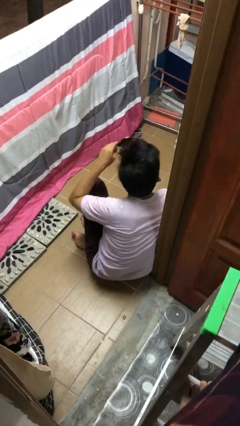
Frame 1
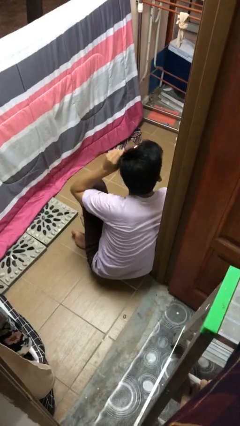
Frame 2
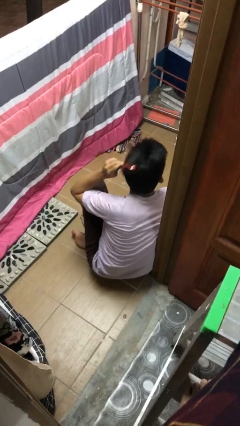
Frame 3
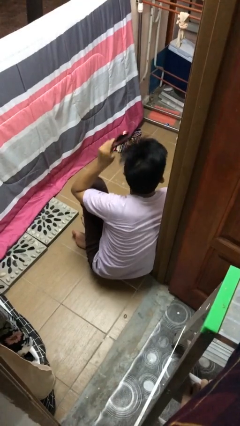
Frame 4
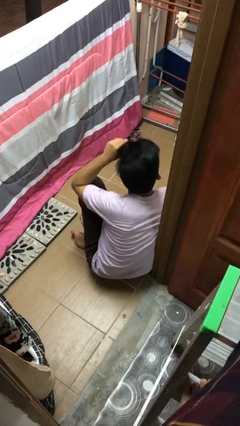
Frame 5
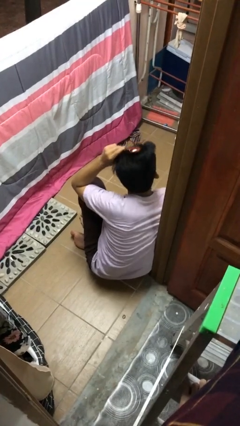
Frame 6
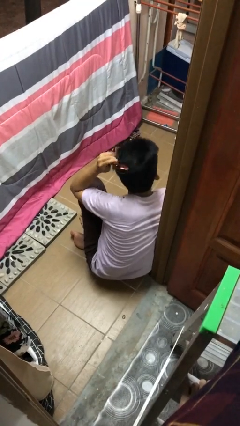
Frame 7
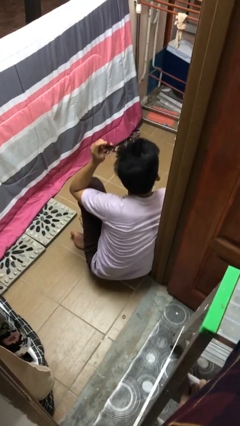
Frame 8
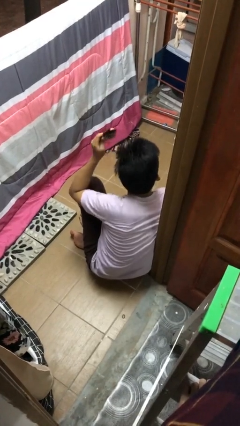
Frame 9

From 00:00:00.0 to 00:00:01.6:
person brushes hair

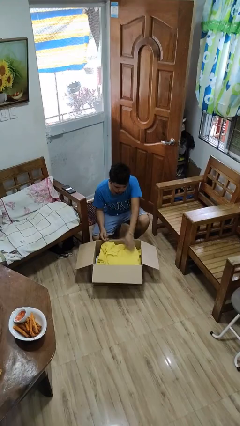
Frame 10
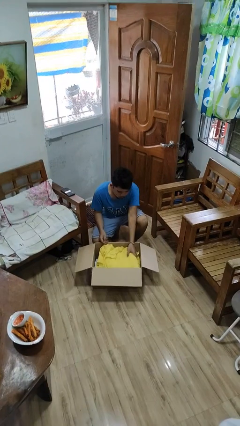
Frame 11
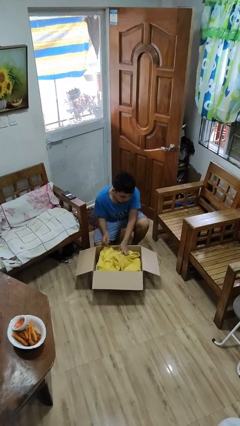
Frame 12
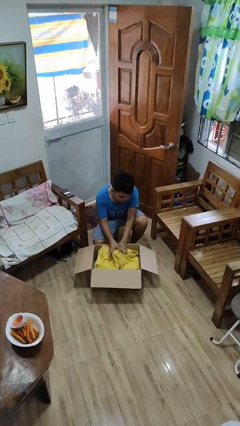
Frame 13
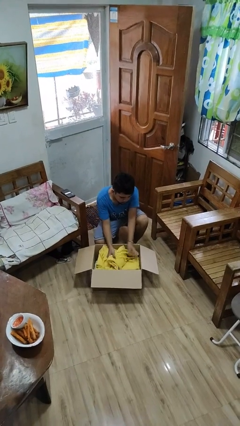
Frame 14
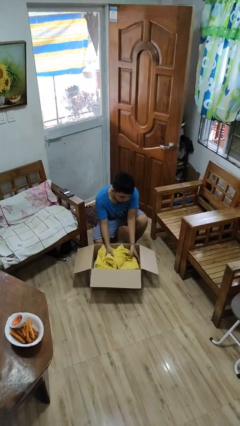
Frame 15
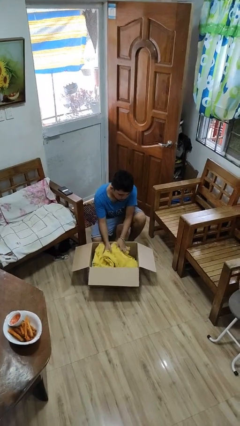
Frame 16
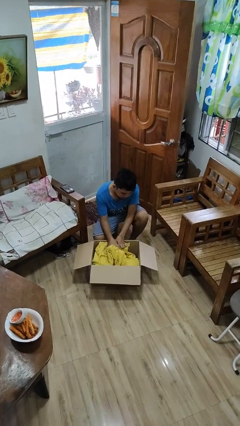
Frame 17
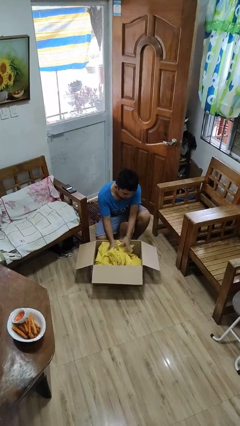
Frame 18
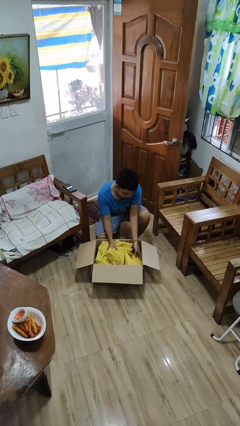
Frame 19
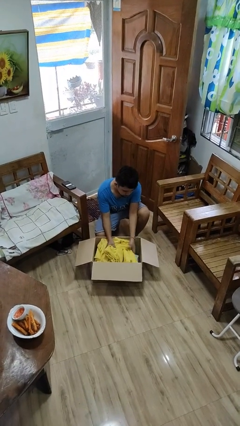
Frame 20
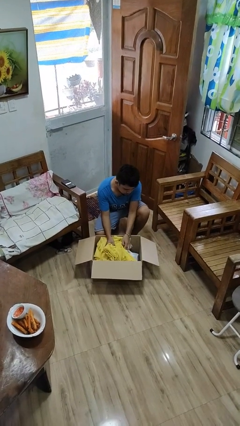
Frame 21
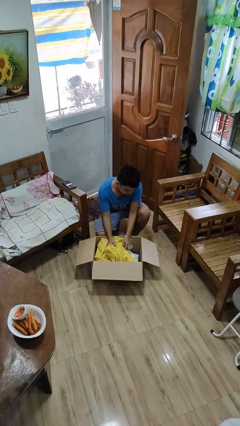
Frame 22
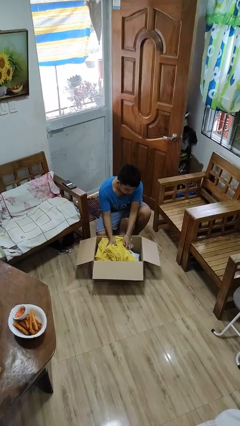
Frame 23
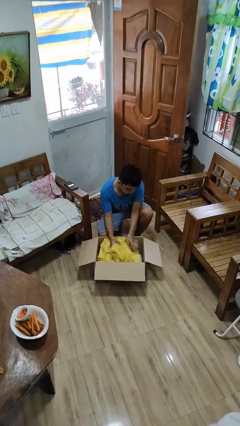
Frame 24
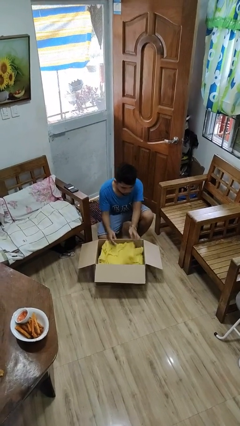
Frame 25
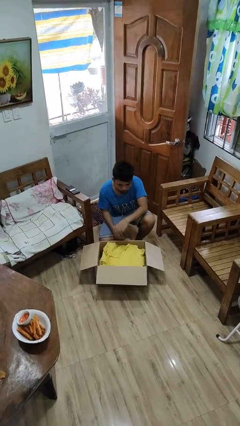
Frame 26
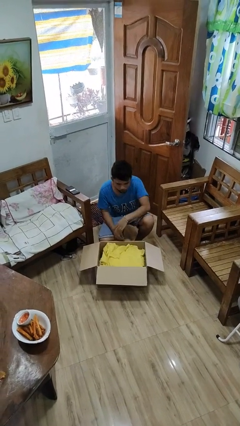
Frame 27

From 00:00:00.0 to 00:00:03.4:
person searches in box

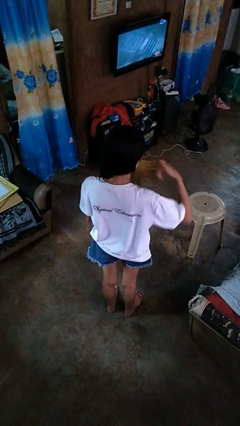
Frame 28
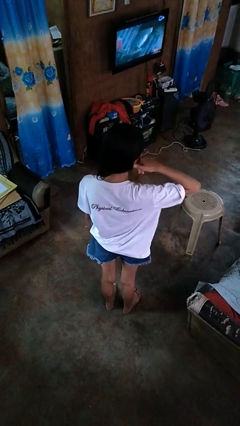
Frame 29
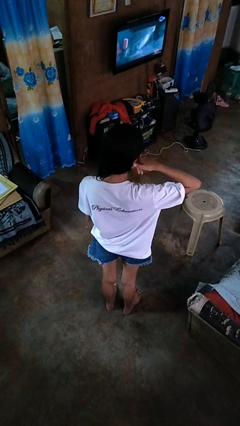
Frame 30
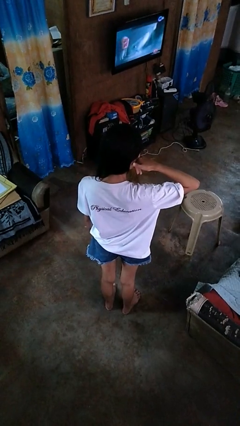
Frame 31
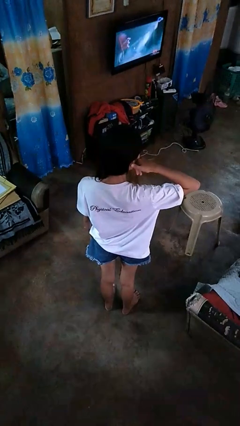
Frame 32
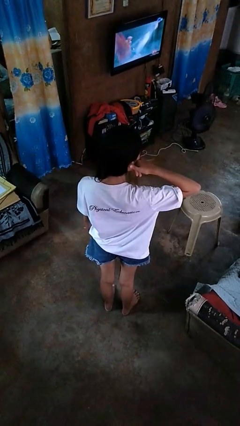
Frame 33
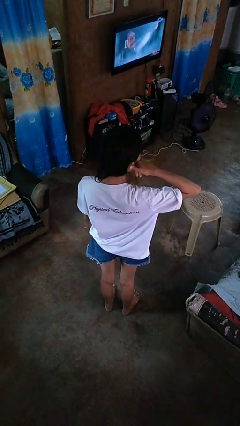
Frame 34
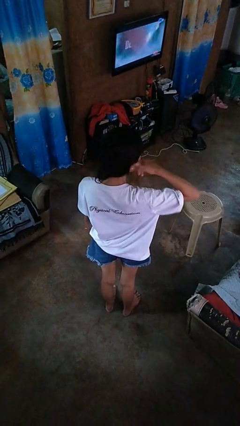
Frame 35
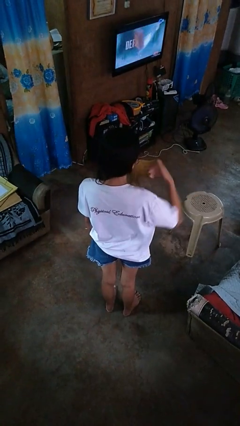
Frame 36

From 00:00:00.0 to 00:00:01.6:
person gestures call me

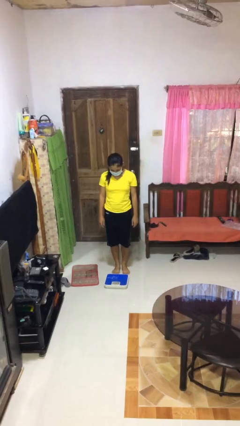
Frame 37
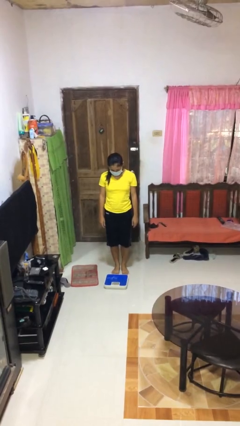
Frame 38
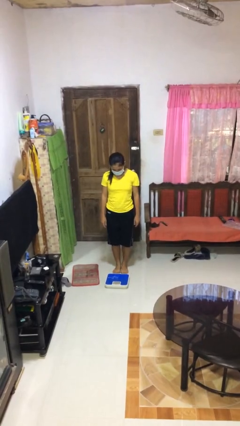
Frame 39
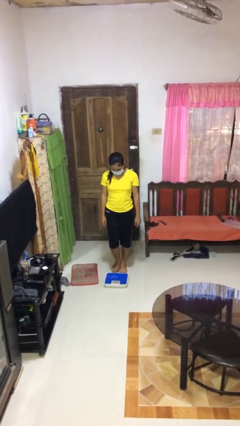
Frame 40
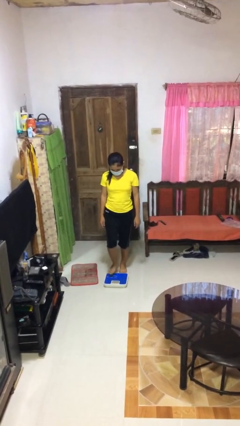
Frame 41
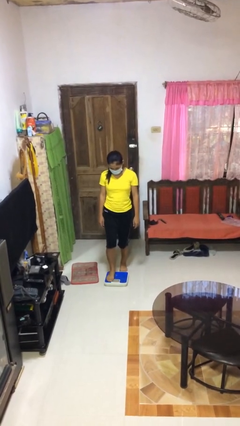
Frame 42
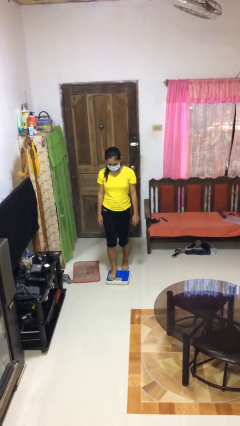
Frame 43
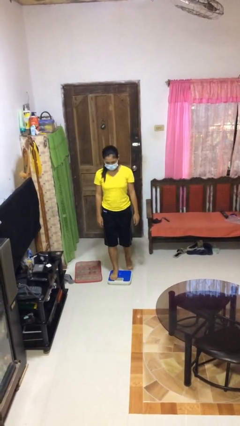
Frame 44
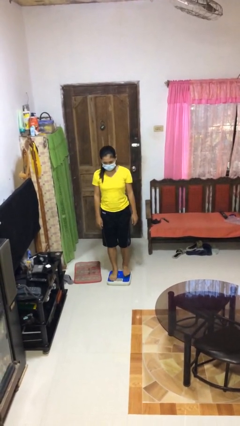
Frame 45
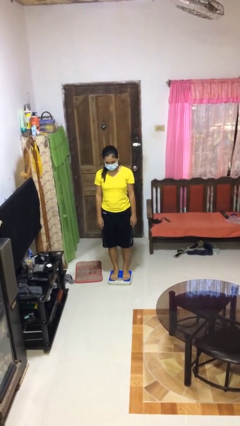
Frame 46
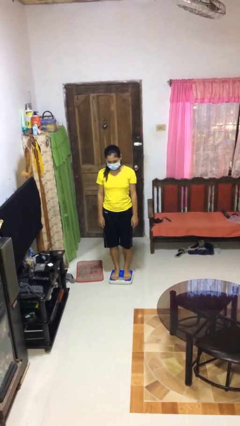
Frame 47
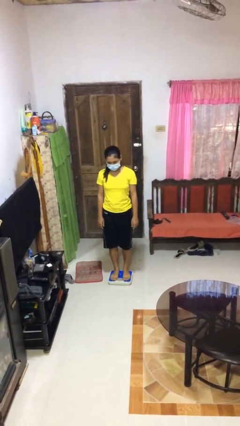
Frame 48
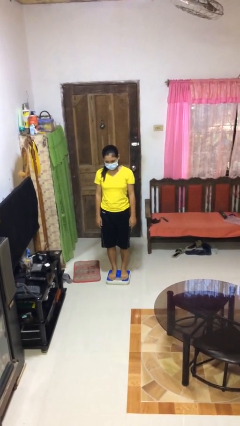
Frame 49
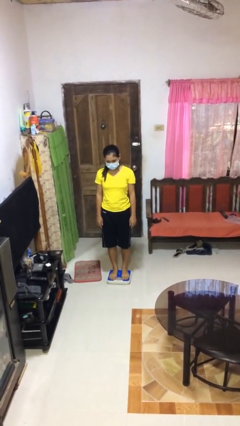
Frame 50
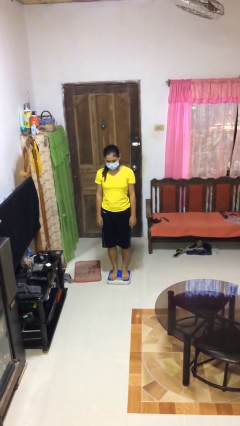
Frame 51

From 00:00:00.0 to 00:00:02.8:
person uses bodyweight scale

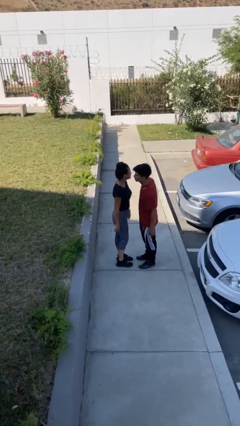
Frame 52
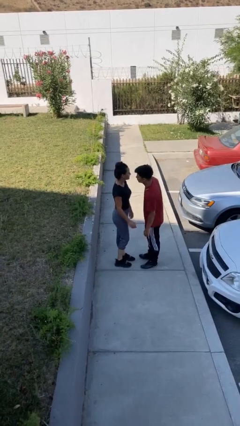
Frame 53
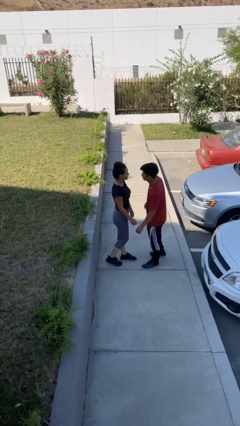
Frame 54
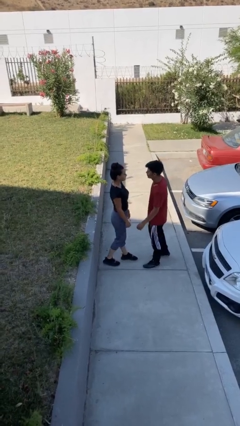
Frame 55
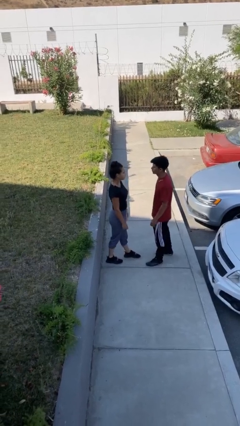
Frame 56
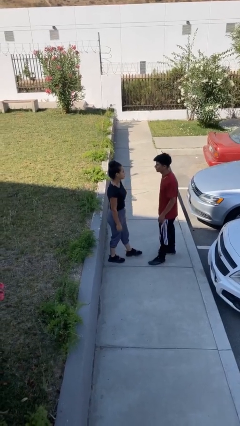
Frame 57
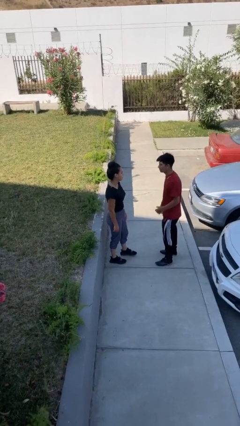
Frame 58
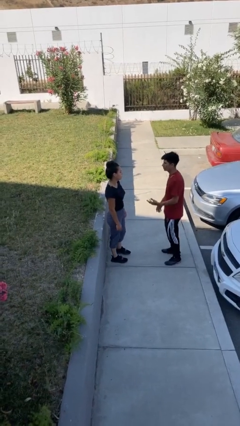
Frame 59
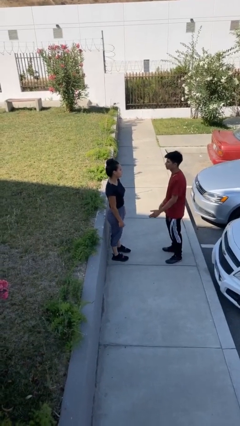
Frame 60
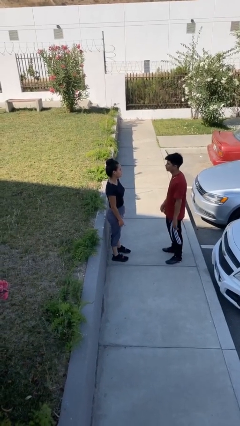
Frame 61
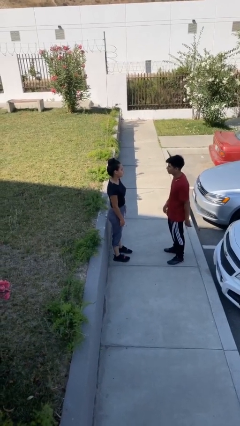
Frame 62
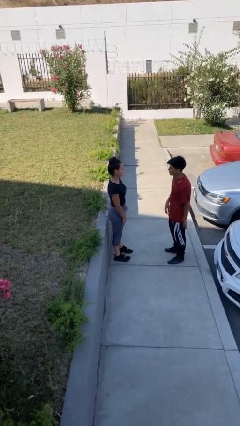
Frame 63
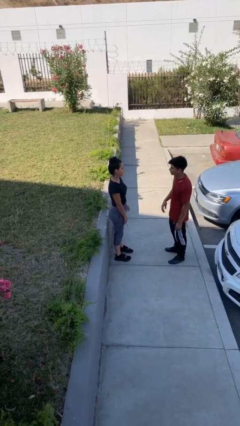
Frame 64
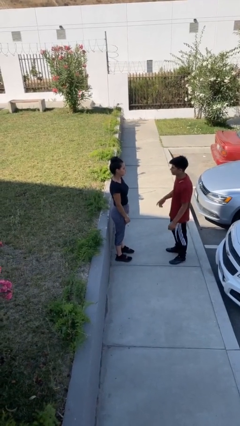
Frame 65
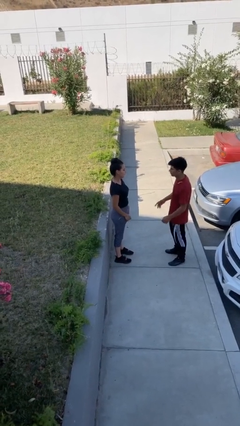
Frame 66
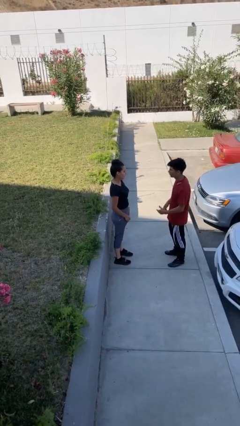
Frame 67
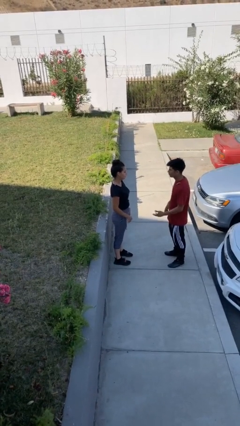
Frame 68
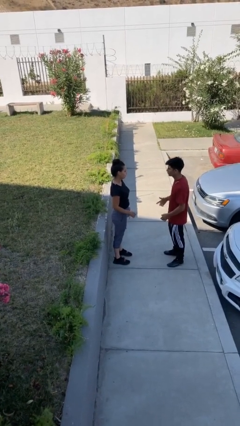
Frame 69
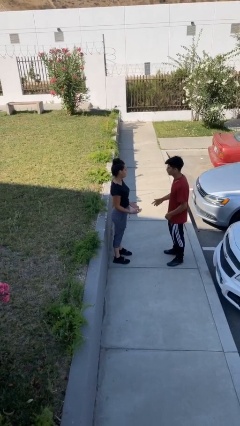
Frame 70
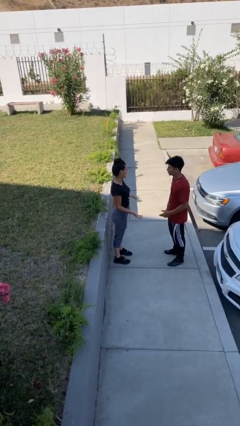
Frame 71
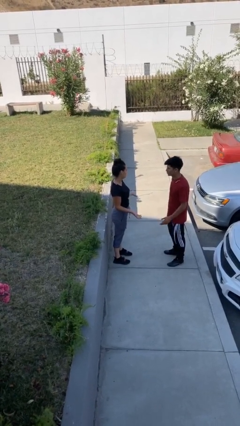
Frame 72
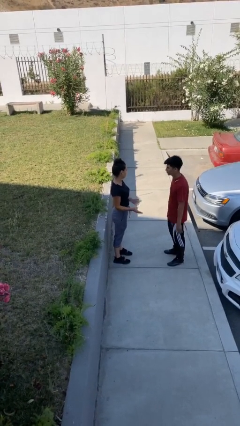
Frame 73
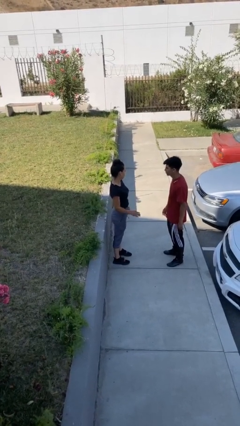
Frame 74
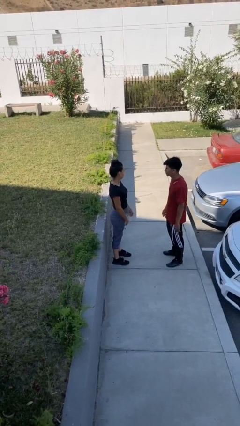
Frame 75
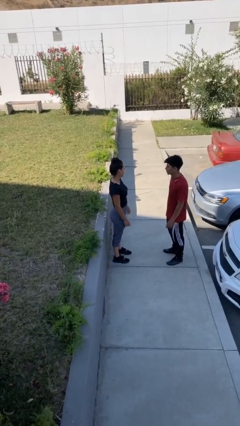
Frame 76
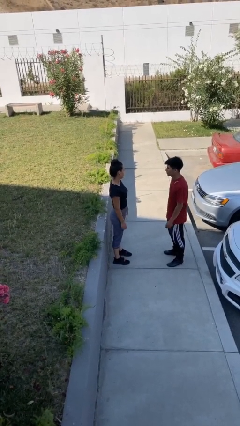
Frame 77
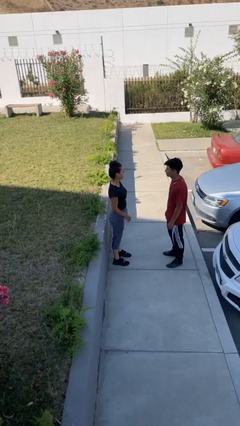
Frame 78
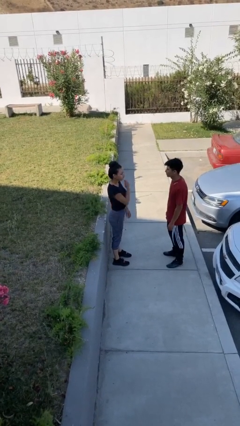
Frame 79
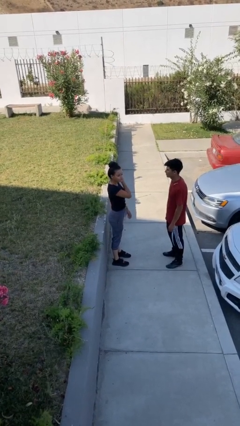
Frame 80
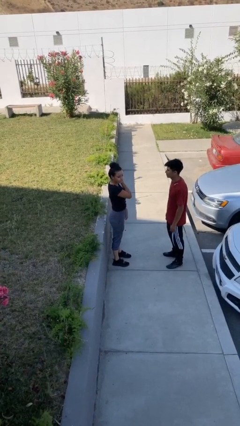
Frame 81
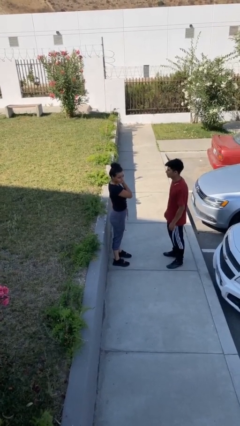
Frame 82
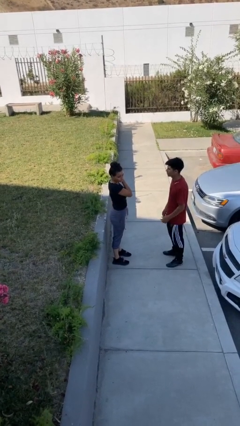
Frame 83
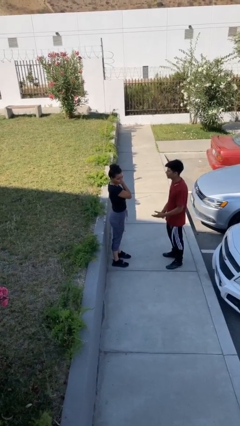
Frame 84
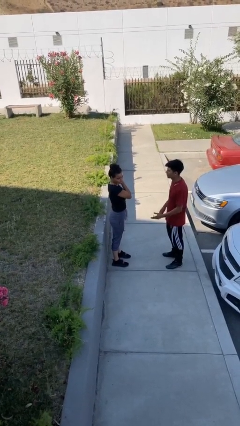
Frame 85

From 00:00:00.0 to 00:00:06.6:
person talks to person

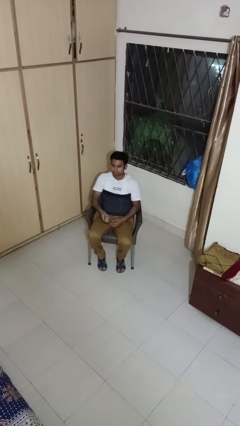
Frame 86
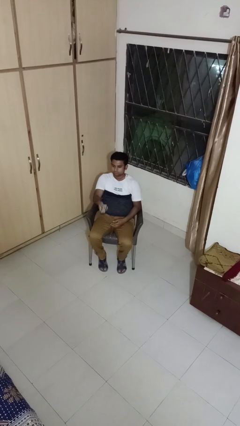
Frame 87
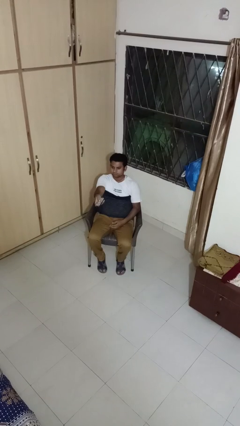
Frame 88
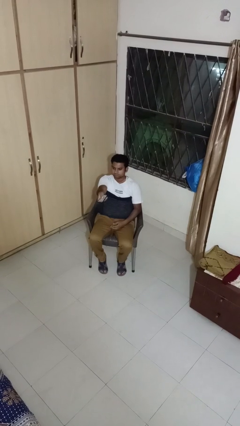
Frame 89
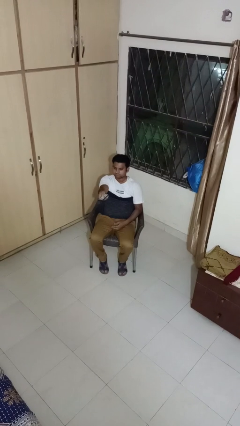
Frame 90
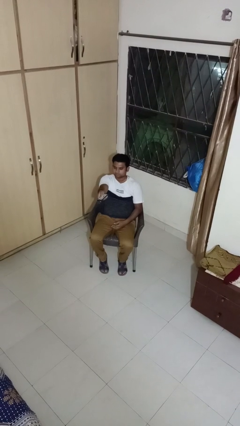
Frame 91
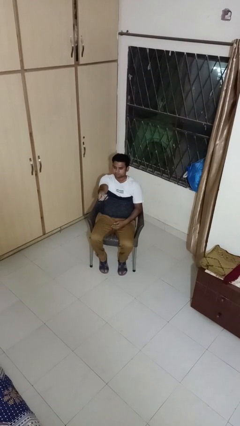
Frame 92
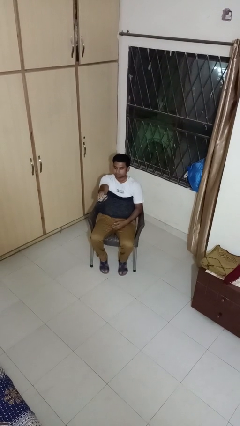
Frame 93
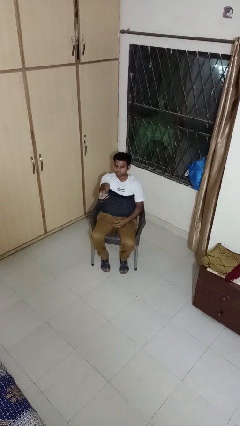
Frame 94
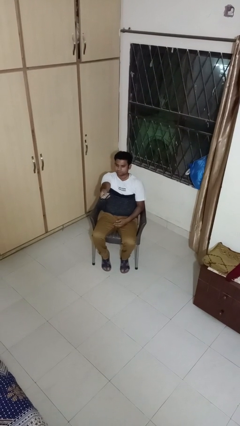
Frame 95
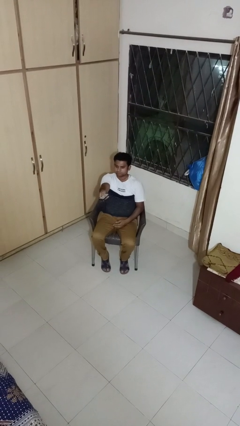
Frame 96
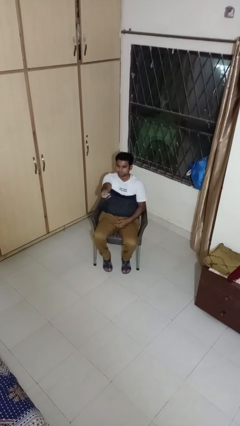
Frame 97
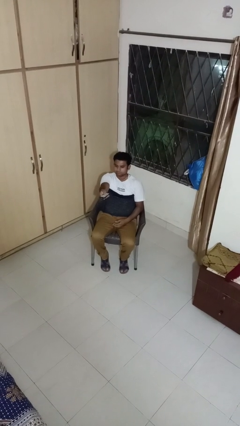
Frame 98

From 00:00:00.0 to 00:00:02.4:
person uses television remote
